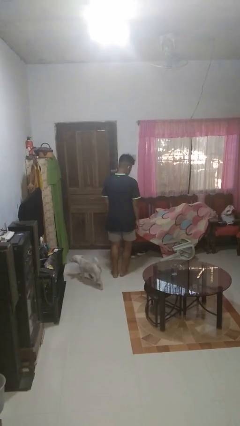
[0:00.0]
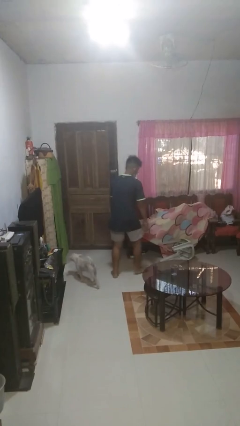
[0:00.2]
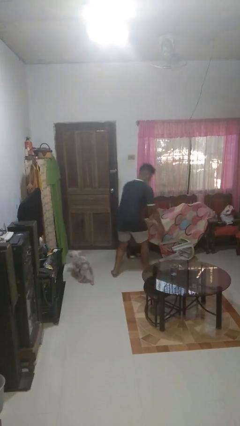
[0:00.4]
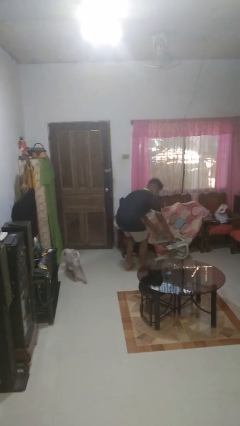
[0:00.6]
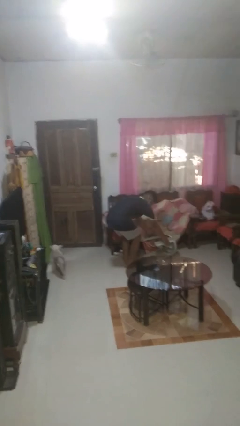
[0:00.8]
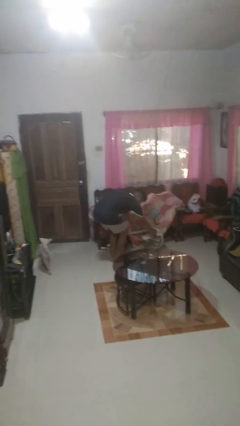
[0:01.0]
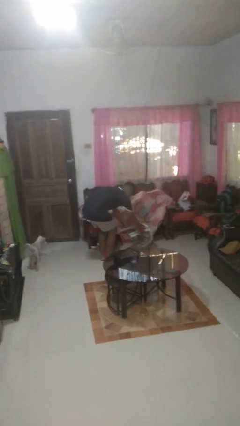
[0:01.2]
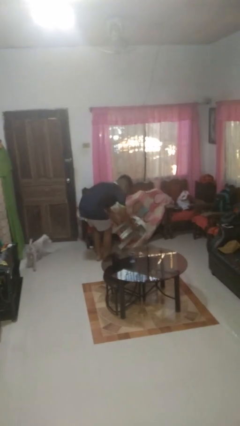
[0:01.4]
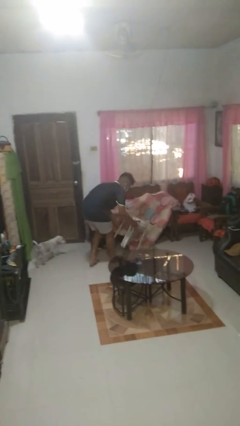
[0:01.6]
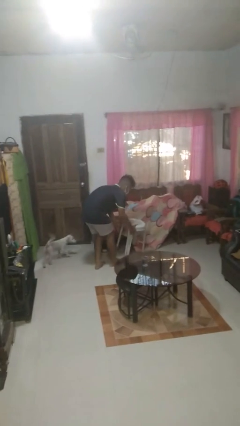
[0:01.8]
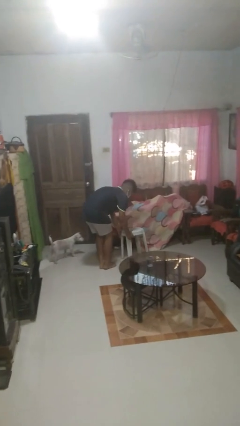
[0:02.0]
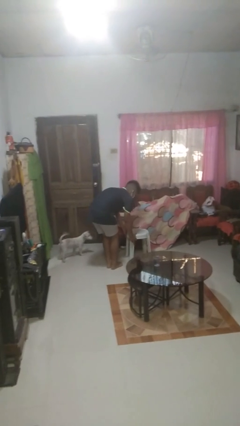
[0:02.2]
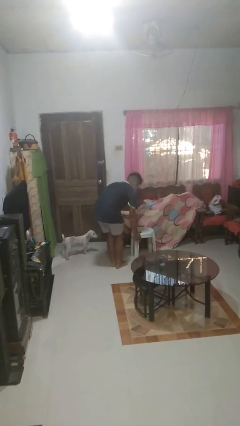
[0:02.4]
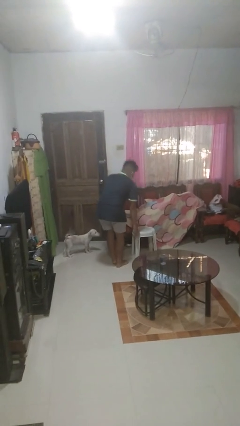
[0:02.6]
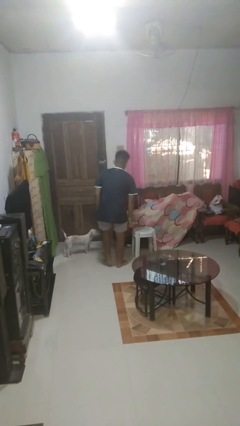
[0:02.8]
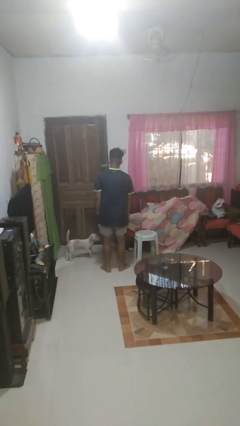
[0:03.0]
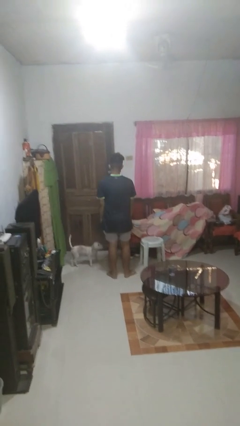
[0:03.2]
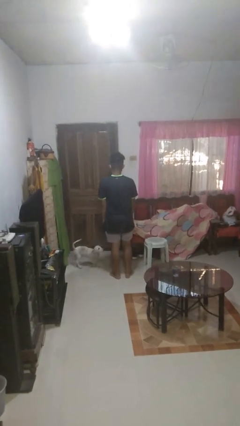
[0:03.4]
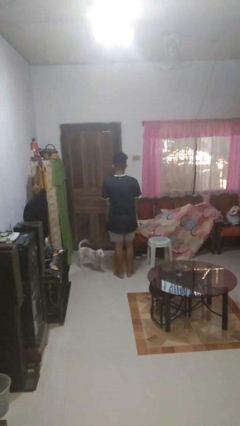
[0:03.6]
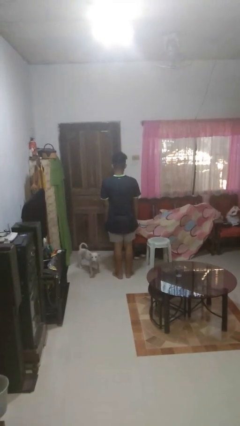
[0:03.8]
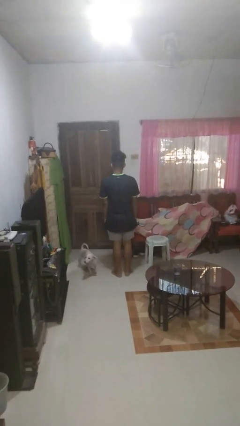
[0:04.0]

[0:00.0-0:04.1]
person sets upright furniture

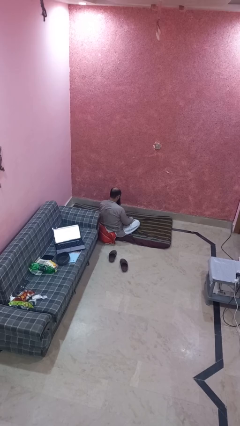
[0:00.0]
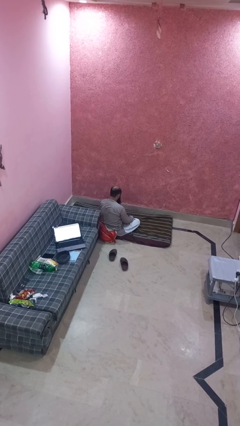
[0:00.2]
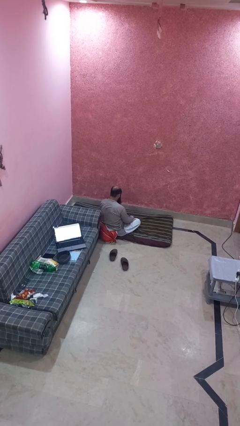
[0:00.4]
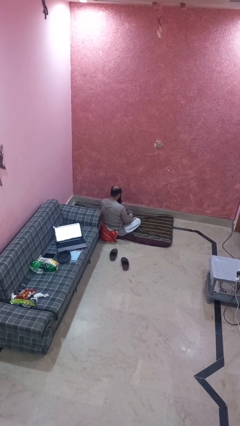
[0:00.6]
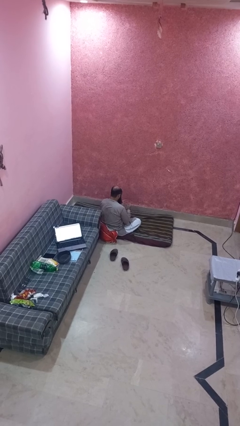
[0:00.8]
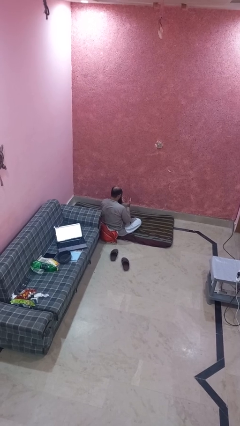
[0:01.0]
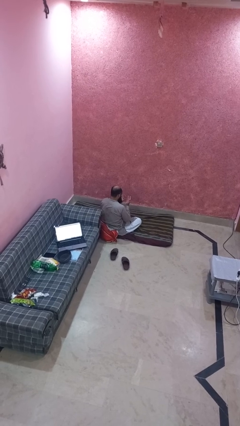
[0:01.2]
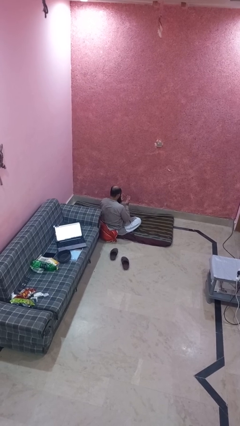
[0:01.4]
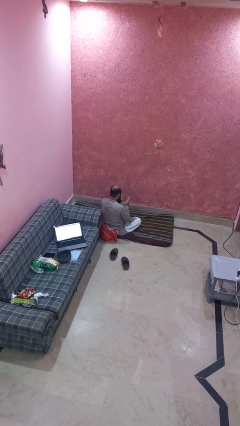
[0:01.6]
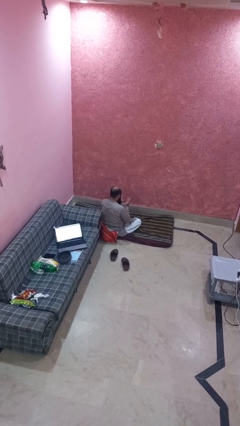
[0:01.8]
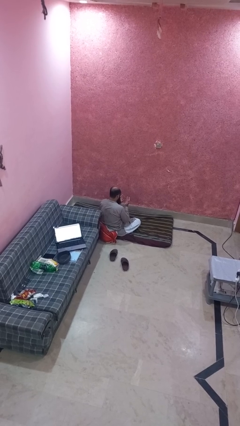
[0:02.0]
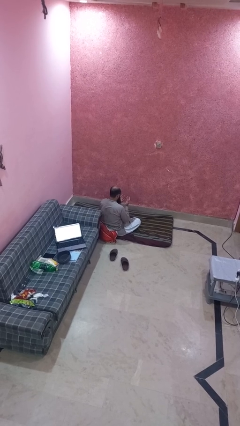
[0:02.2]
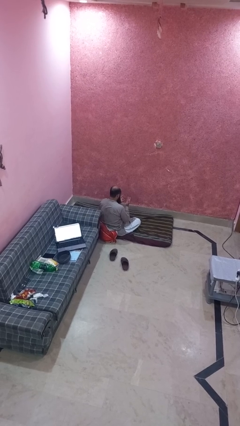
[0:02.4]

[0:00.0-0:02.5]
person looks at hands in lap

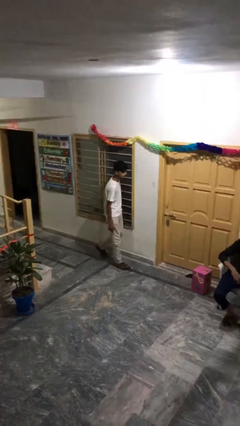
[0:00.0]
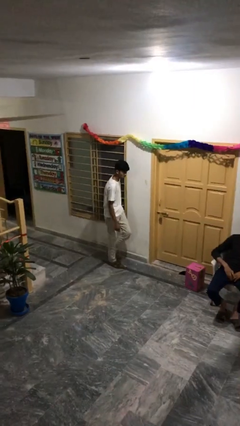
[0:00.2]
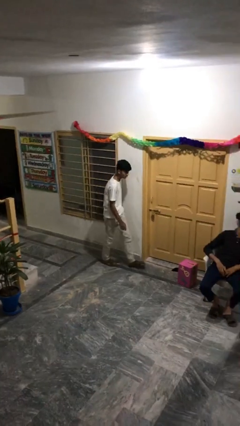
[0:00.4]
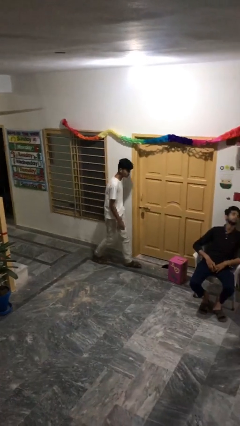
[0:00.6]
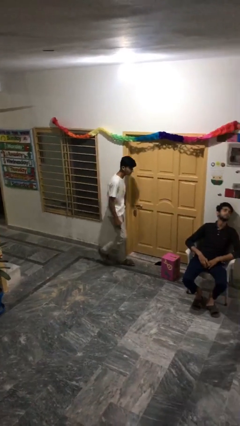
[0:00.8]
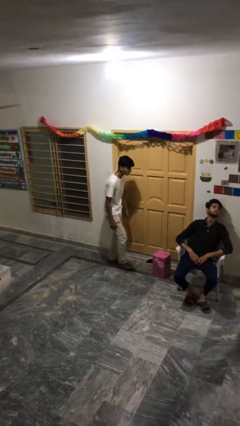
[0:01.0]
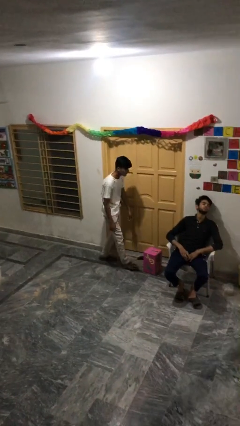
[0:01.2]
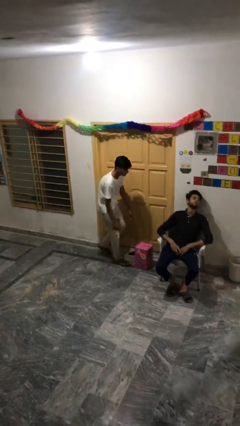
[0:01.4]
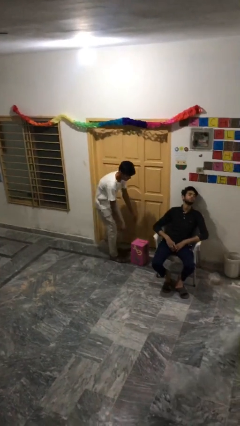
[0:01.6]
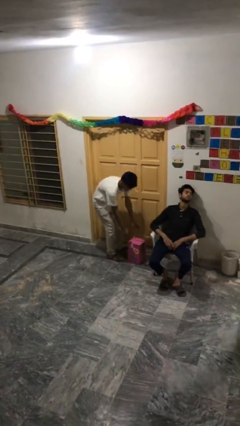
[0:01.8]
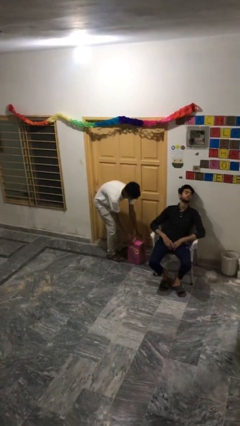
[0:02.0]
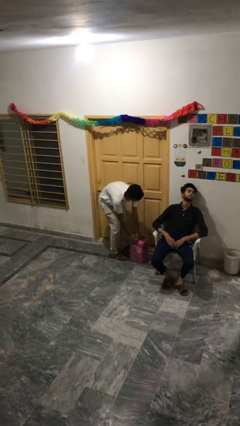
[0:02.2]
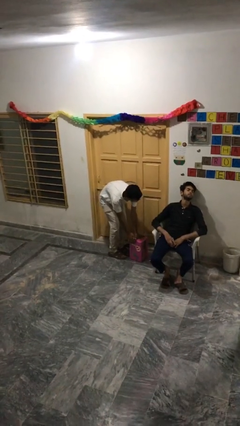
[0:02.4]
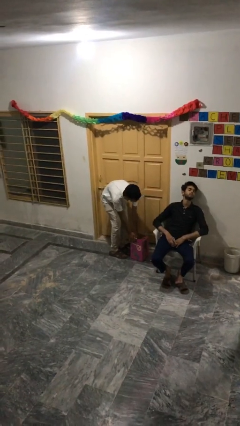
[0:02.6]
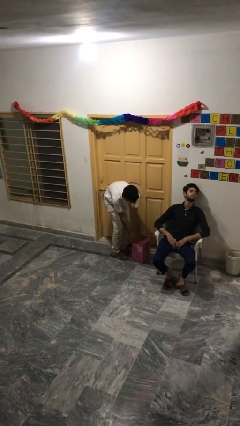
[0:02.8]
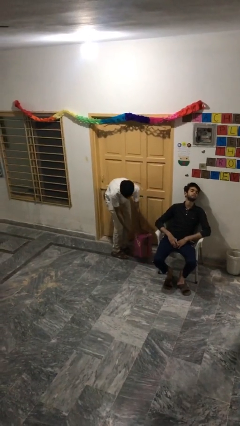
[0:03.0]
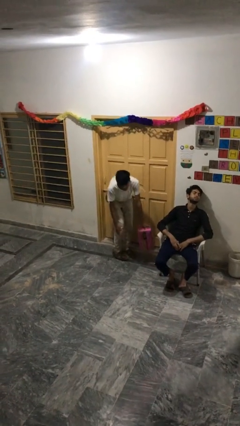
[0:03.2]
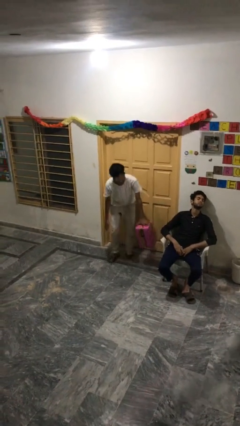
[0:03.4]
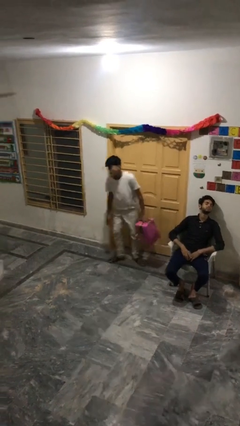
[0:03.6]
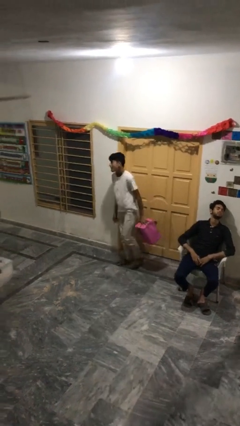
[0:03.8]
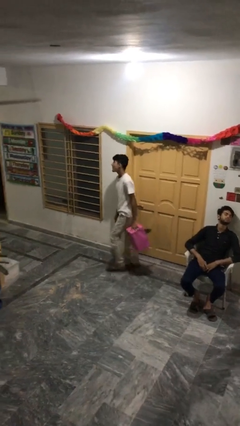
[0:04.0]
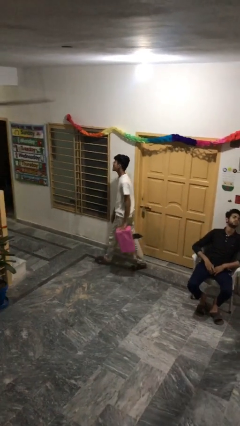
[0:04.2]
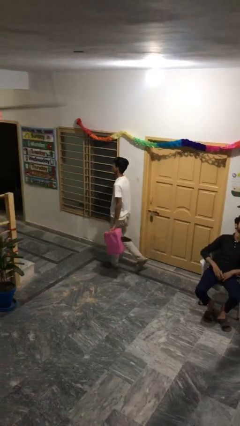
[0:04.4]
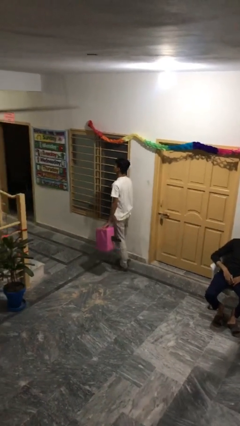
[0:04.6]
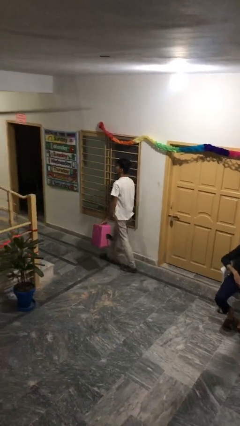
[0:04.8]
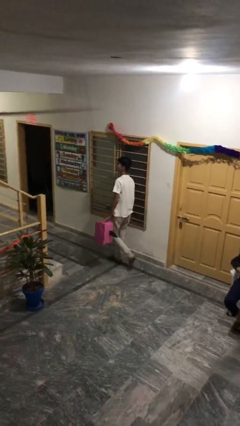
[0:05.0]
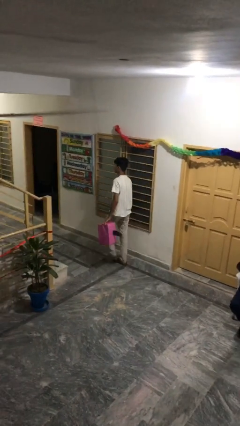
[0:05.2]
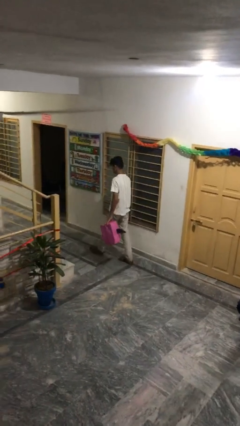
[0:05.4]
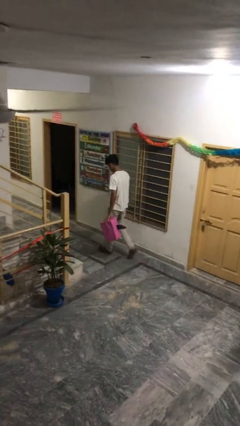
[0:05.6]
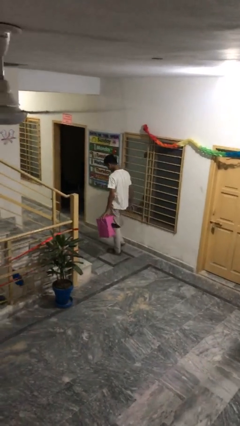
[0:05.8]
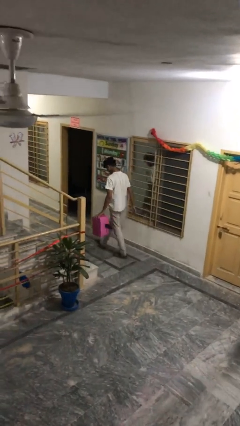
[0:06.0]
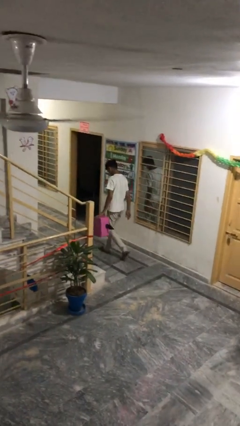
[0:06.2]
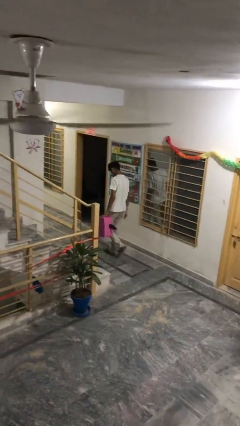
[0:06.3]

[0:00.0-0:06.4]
person steals object from person

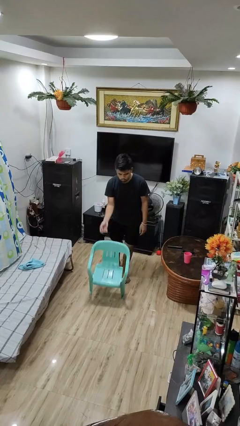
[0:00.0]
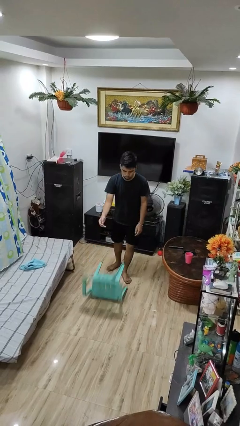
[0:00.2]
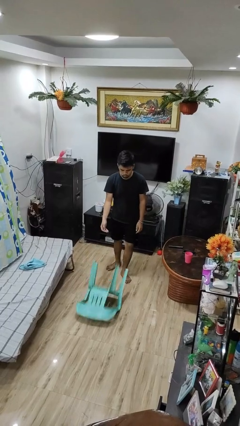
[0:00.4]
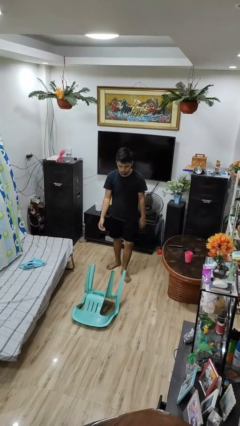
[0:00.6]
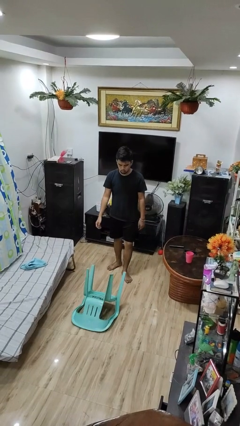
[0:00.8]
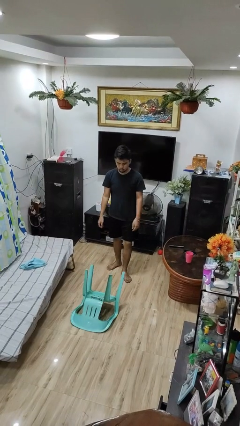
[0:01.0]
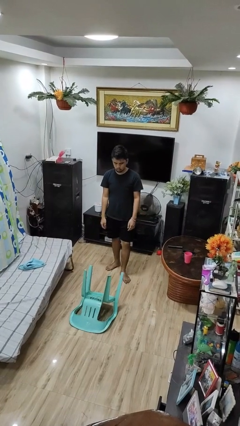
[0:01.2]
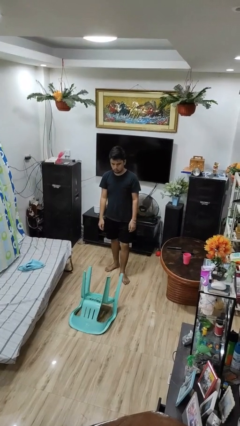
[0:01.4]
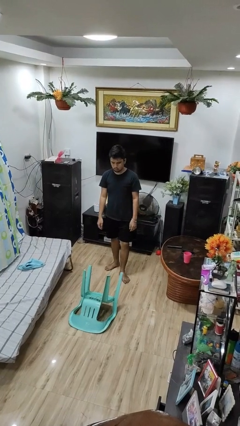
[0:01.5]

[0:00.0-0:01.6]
person knocks over furniture

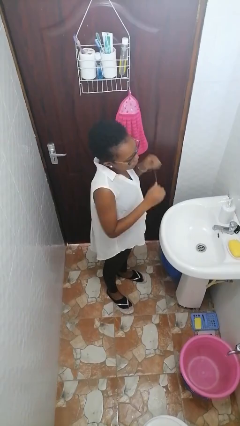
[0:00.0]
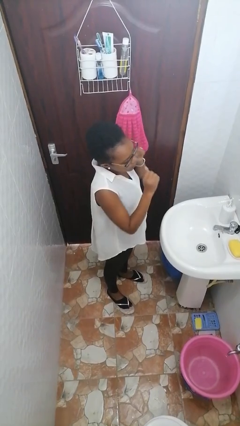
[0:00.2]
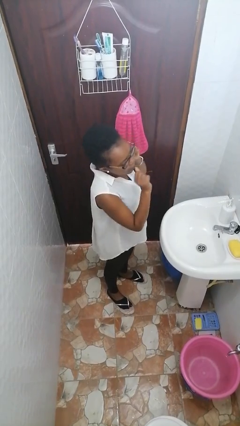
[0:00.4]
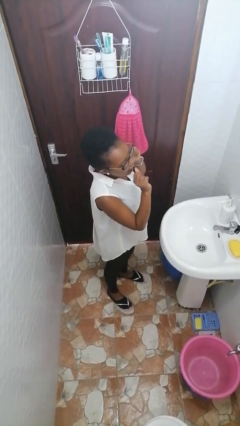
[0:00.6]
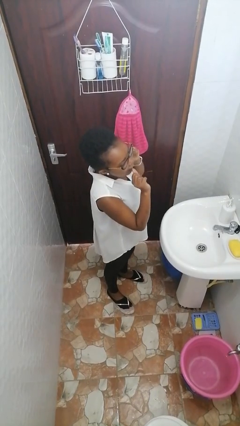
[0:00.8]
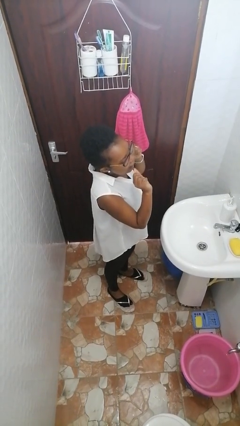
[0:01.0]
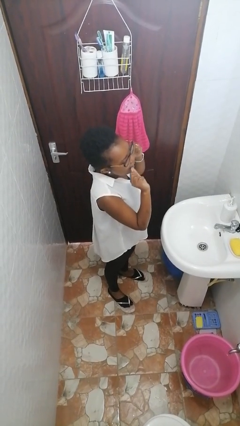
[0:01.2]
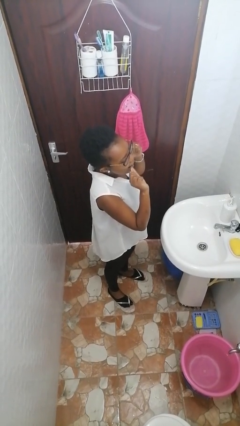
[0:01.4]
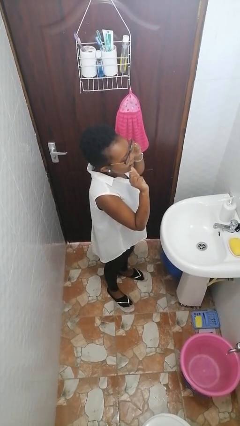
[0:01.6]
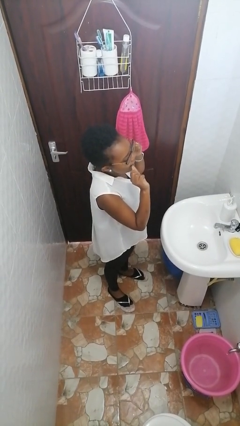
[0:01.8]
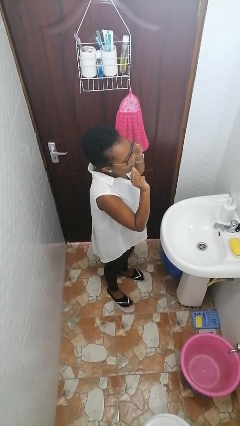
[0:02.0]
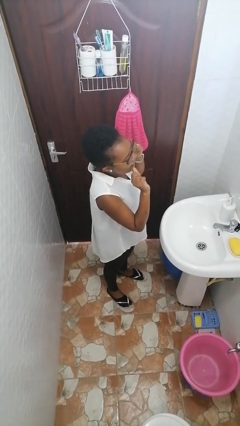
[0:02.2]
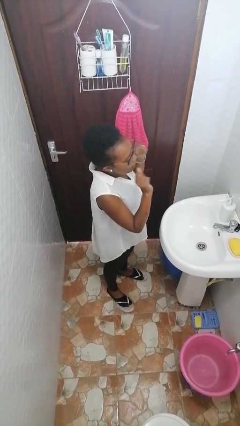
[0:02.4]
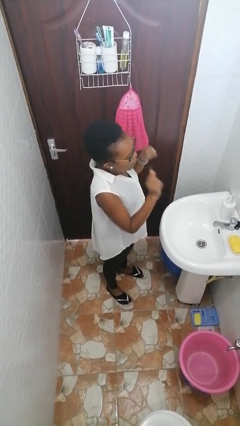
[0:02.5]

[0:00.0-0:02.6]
person flosses

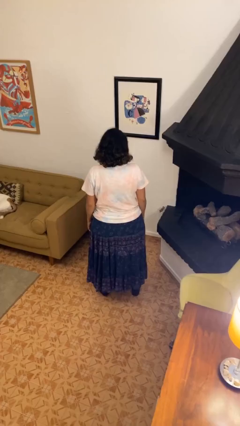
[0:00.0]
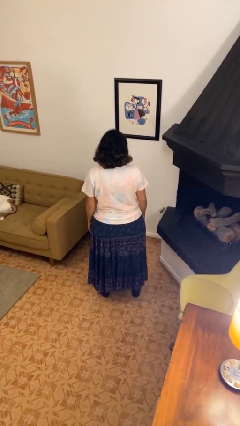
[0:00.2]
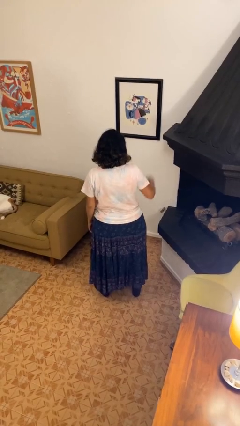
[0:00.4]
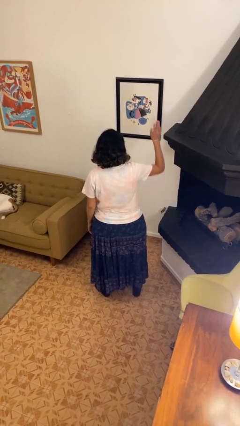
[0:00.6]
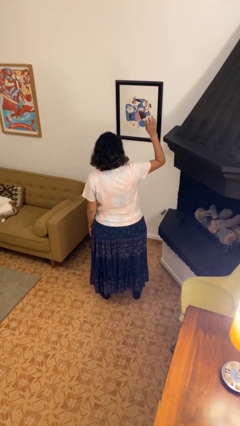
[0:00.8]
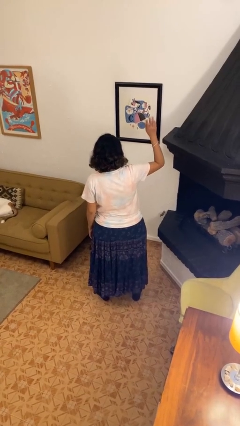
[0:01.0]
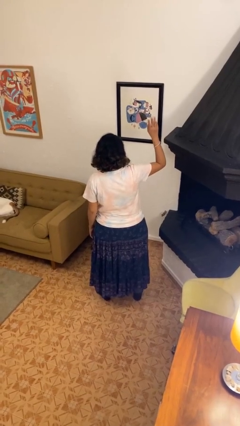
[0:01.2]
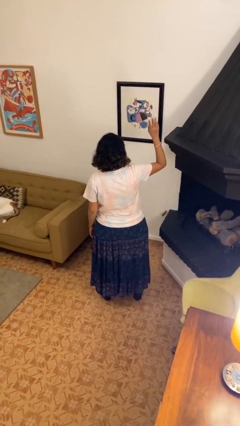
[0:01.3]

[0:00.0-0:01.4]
person gestures raise hand
